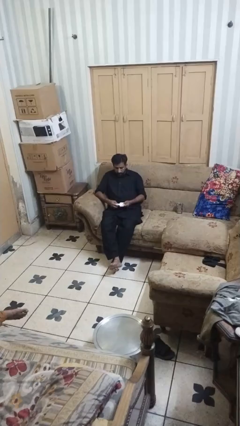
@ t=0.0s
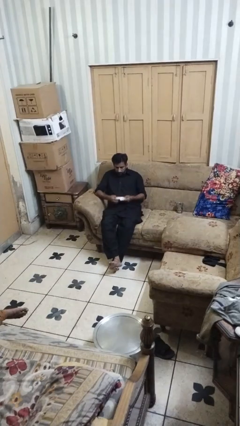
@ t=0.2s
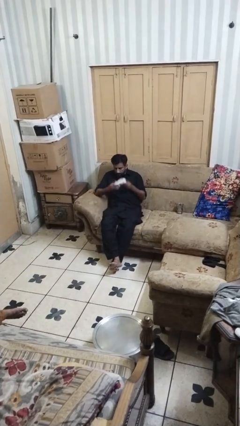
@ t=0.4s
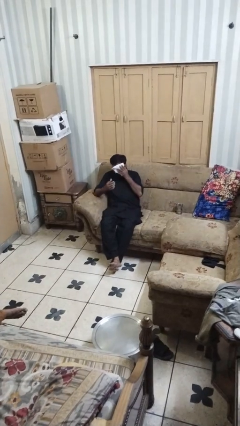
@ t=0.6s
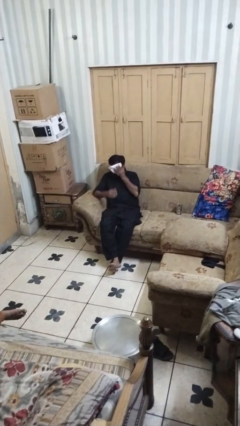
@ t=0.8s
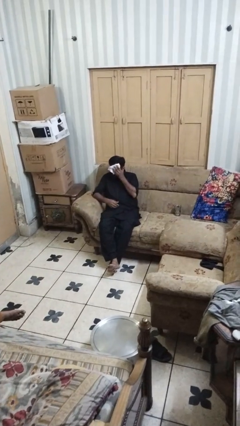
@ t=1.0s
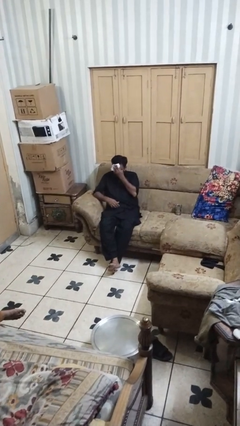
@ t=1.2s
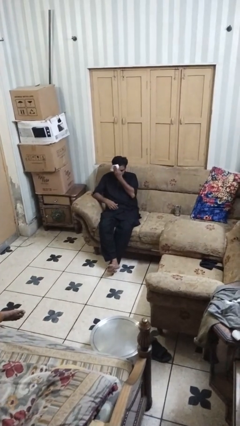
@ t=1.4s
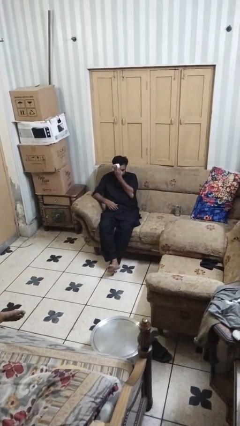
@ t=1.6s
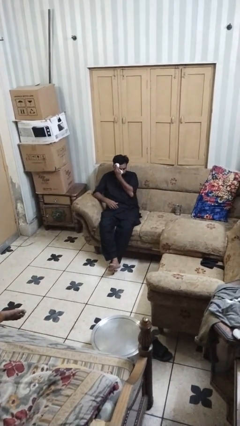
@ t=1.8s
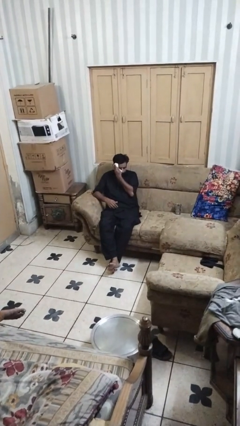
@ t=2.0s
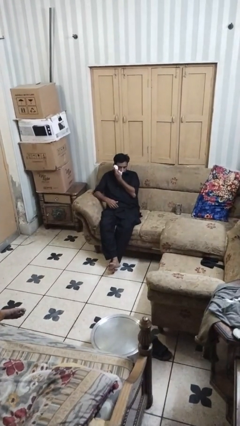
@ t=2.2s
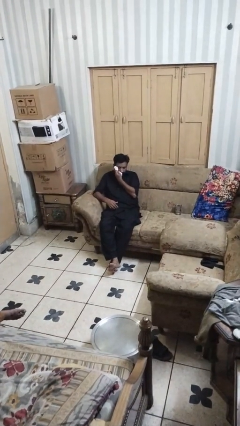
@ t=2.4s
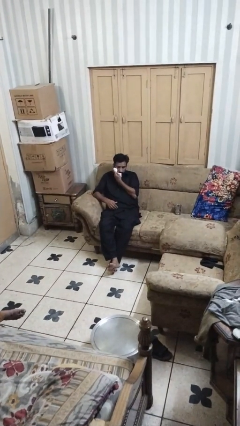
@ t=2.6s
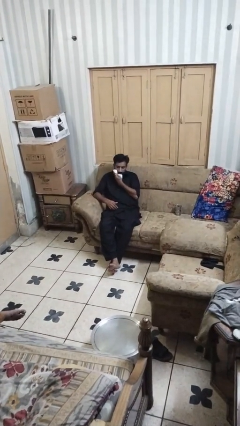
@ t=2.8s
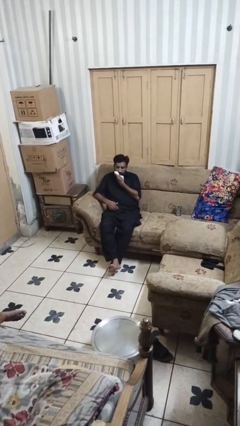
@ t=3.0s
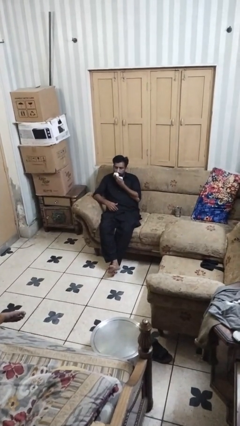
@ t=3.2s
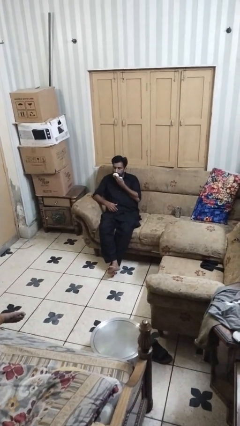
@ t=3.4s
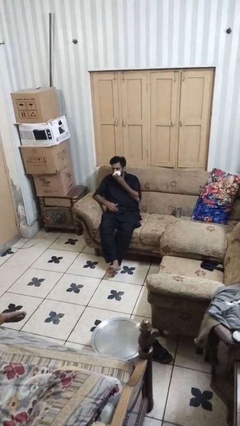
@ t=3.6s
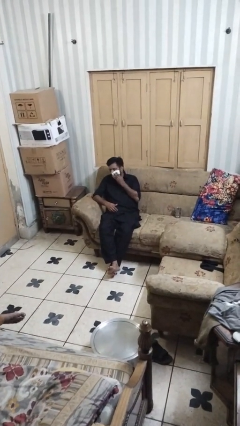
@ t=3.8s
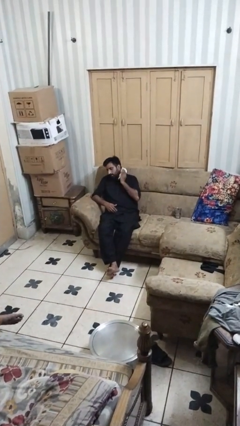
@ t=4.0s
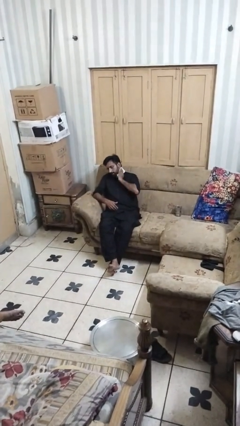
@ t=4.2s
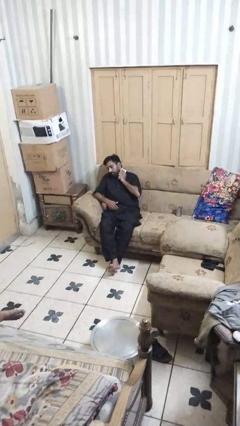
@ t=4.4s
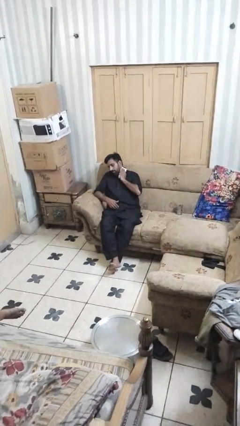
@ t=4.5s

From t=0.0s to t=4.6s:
person wipes mouth with napkin

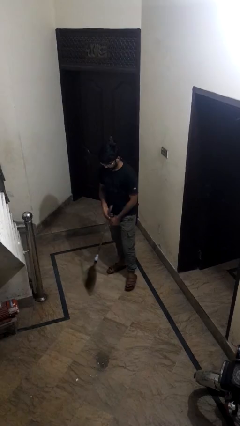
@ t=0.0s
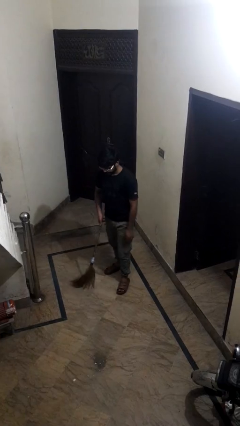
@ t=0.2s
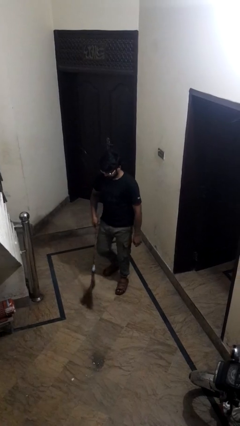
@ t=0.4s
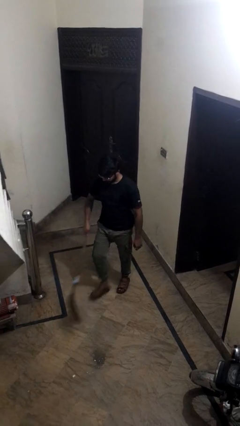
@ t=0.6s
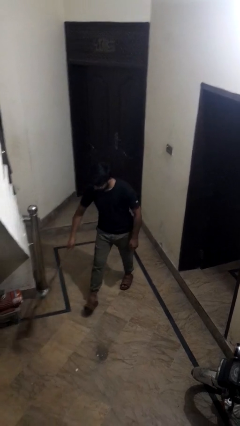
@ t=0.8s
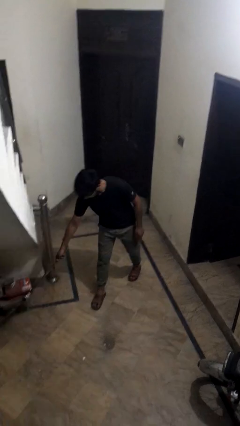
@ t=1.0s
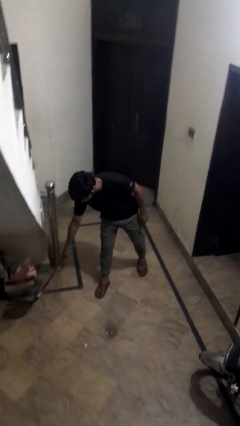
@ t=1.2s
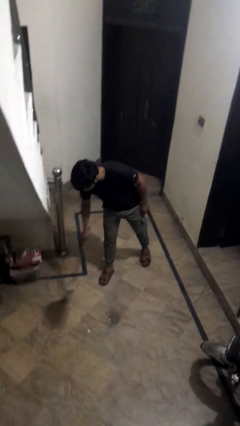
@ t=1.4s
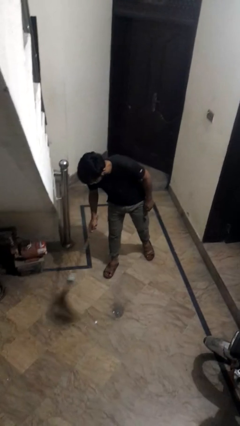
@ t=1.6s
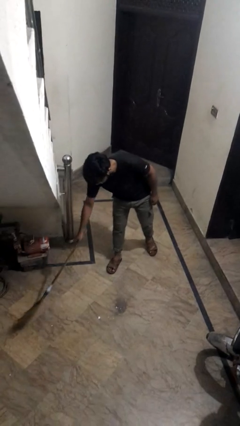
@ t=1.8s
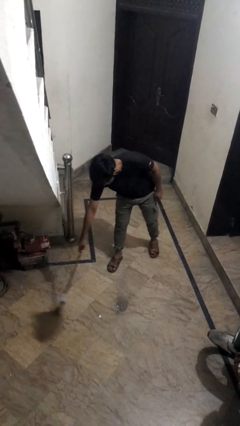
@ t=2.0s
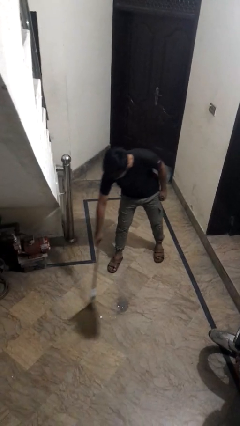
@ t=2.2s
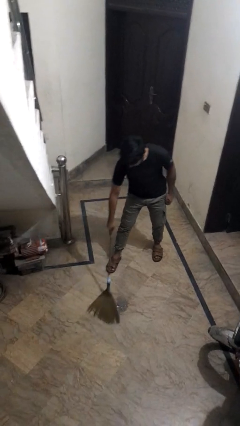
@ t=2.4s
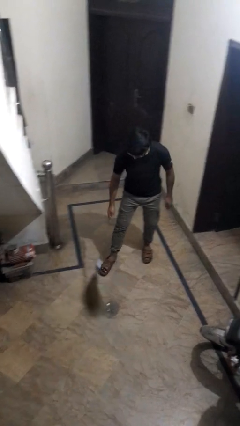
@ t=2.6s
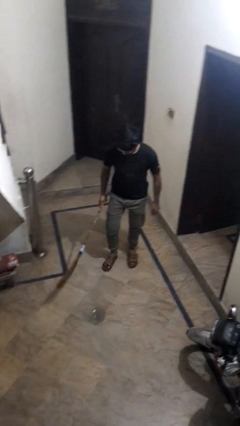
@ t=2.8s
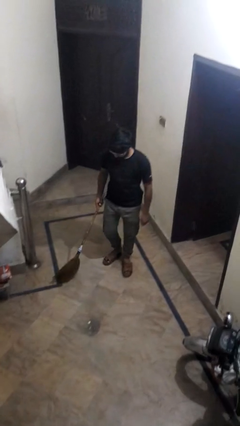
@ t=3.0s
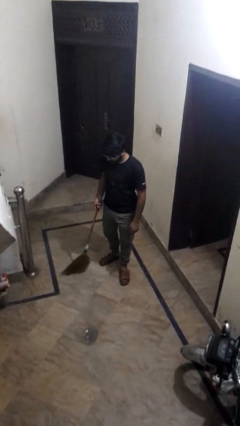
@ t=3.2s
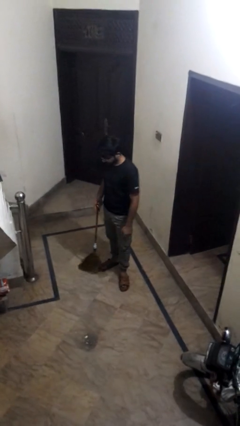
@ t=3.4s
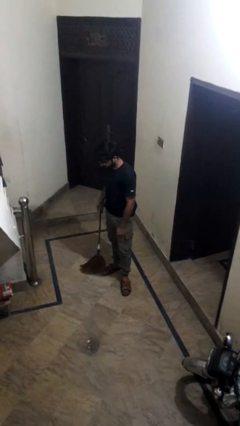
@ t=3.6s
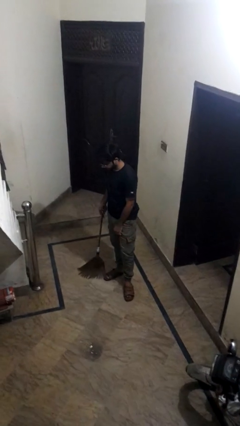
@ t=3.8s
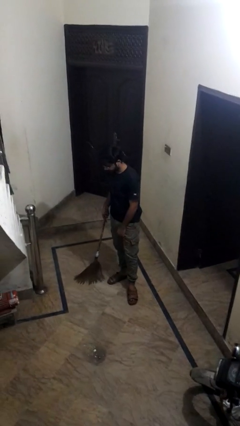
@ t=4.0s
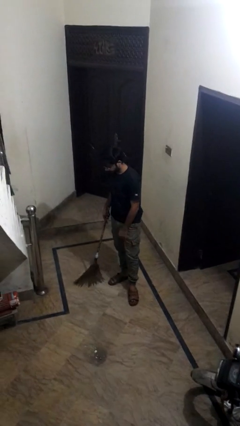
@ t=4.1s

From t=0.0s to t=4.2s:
person sweeps floor

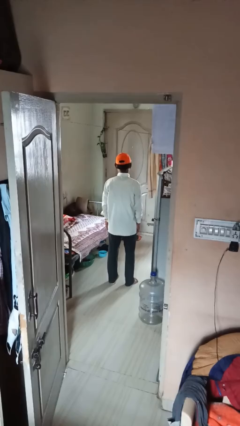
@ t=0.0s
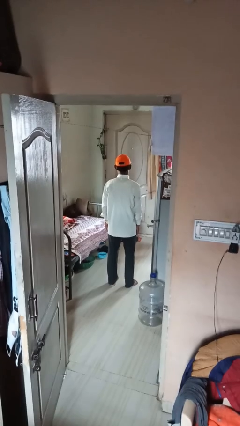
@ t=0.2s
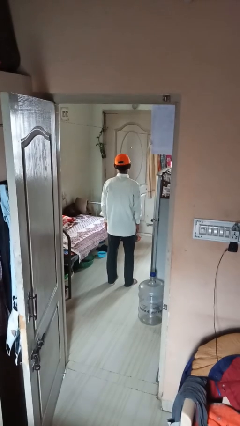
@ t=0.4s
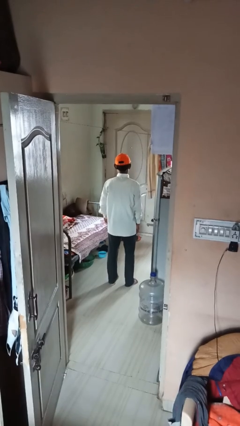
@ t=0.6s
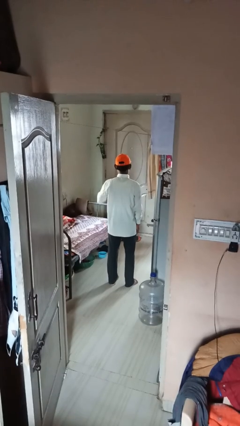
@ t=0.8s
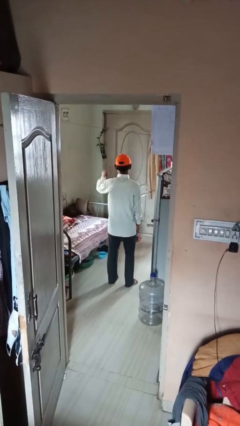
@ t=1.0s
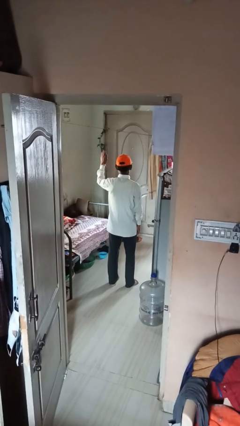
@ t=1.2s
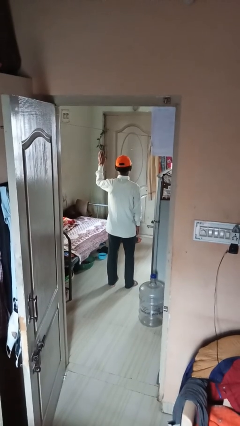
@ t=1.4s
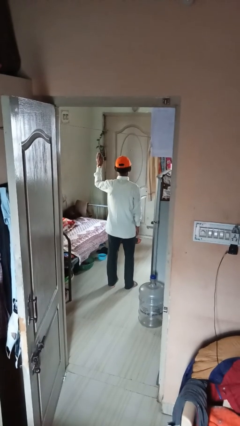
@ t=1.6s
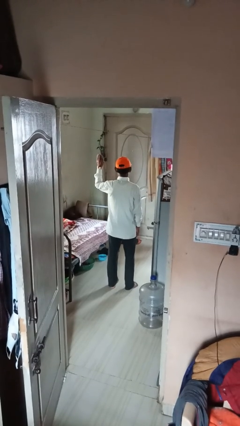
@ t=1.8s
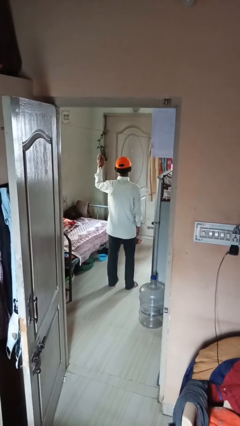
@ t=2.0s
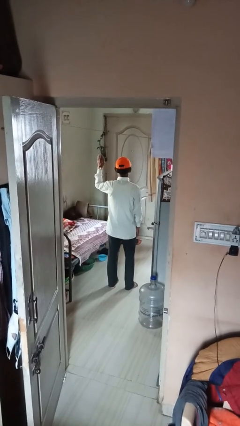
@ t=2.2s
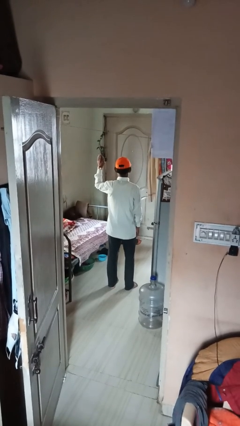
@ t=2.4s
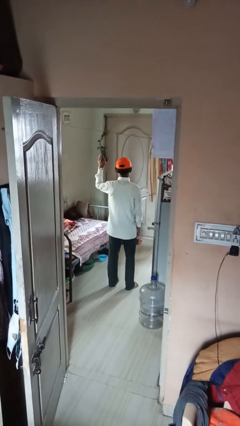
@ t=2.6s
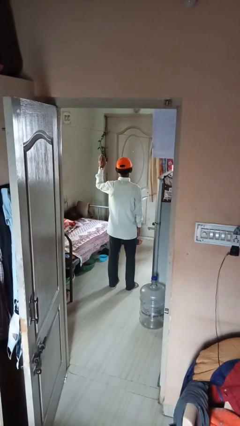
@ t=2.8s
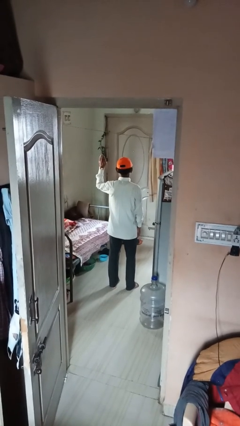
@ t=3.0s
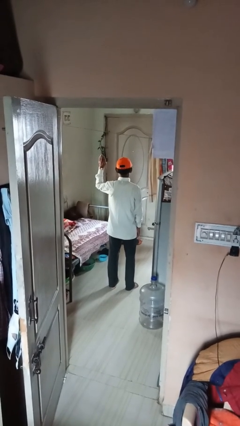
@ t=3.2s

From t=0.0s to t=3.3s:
person gestures raise hand

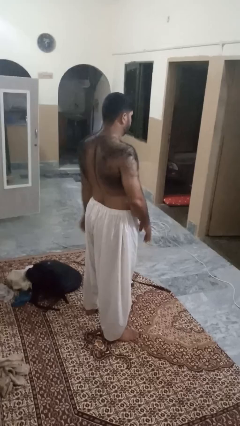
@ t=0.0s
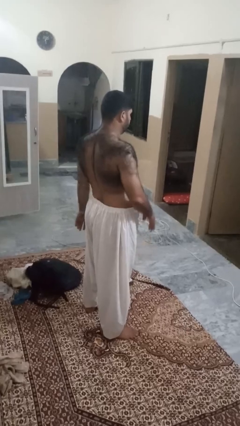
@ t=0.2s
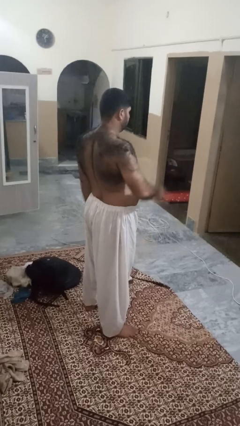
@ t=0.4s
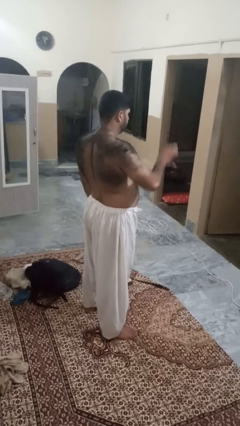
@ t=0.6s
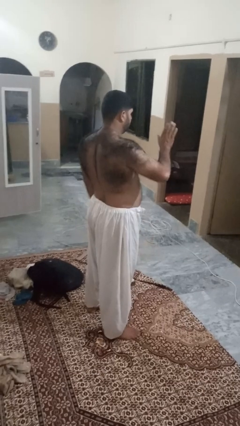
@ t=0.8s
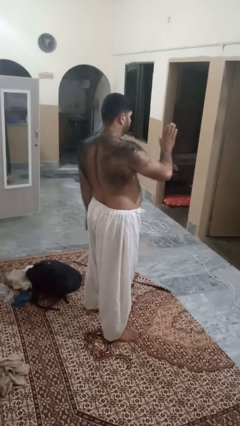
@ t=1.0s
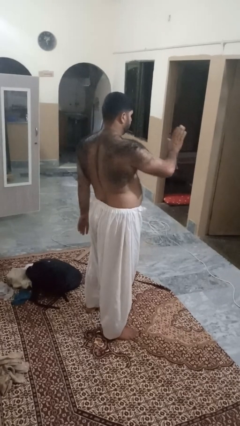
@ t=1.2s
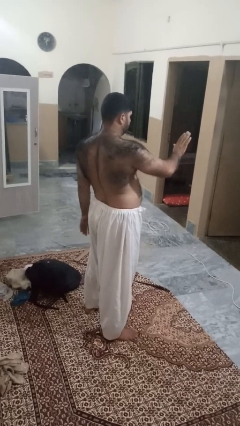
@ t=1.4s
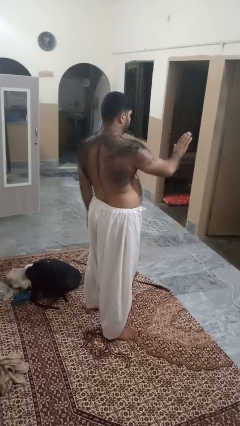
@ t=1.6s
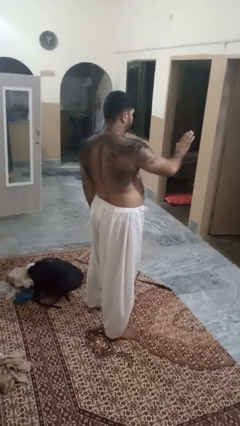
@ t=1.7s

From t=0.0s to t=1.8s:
person gestures stop

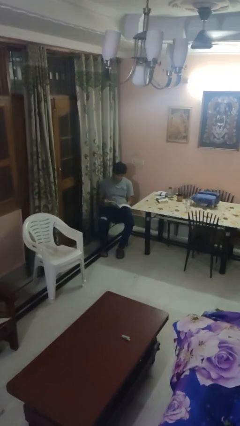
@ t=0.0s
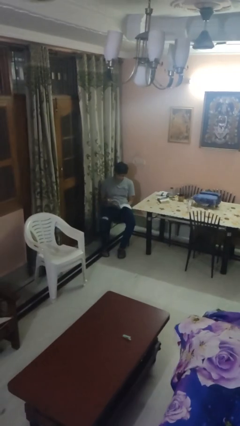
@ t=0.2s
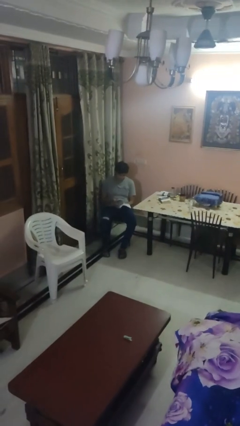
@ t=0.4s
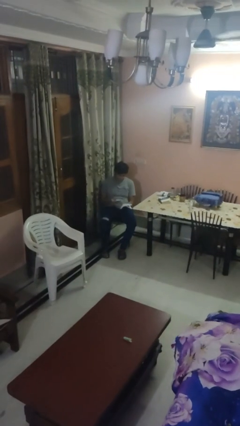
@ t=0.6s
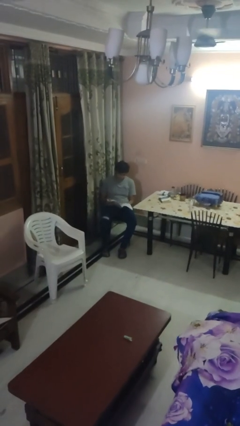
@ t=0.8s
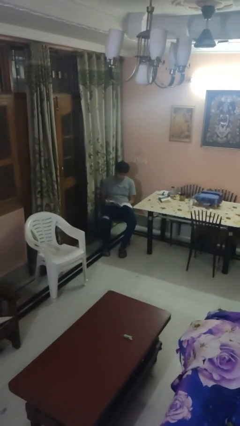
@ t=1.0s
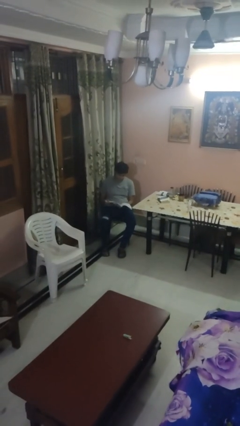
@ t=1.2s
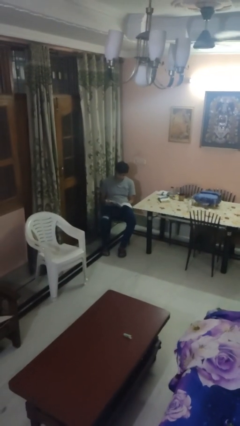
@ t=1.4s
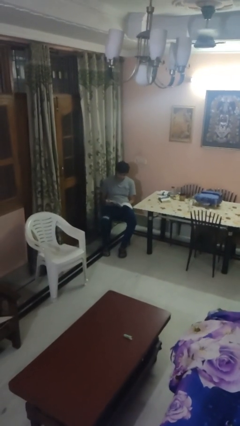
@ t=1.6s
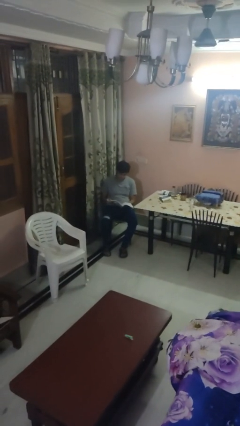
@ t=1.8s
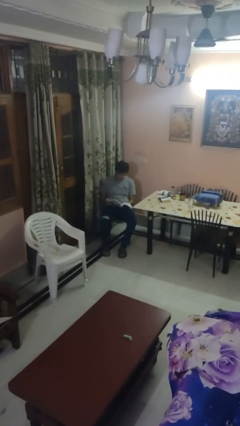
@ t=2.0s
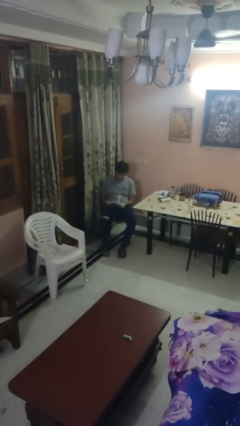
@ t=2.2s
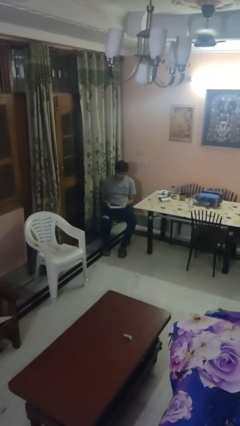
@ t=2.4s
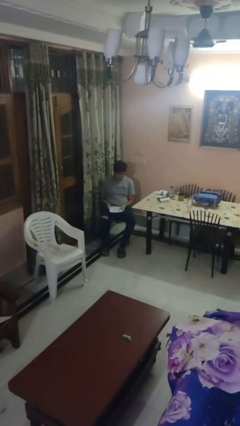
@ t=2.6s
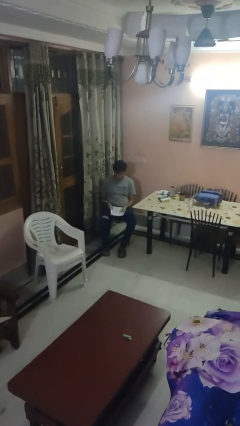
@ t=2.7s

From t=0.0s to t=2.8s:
person reads magazine

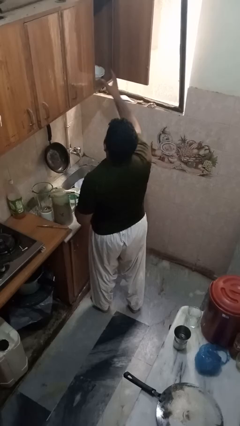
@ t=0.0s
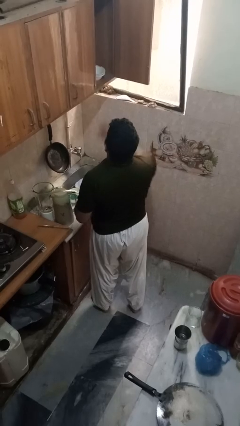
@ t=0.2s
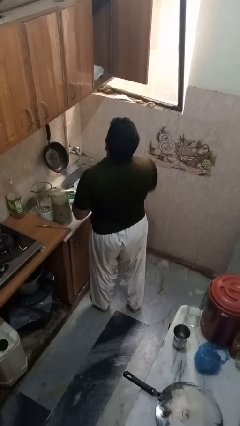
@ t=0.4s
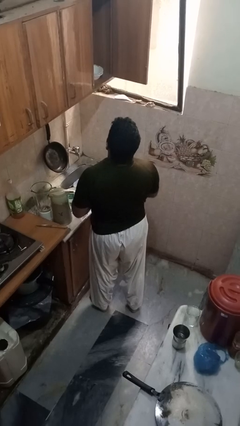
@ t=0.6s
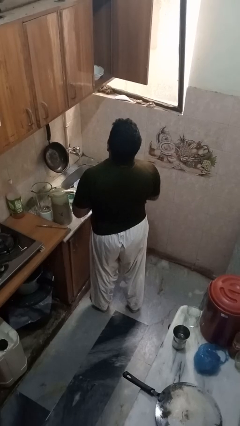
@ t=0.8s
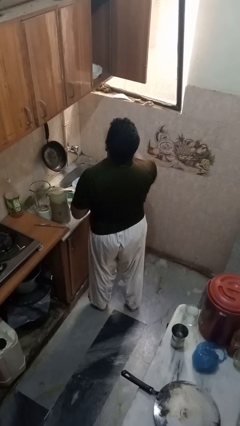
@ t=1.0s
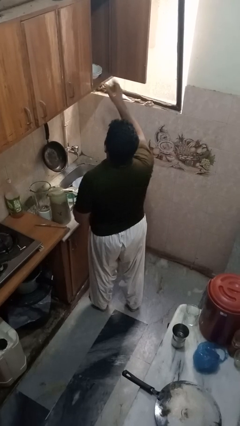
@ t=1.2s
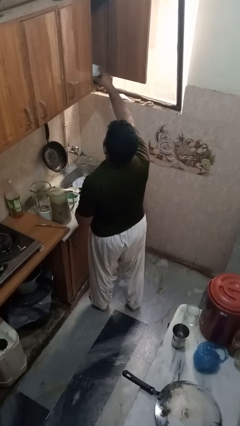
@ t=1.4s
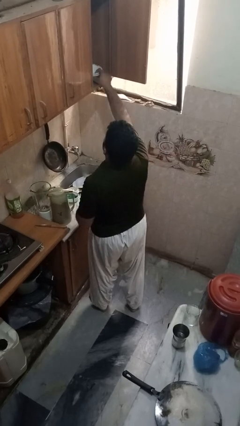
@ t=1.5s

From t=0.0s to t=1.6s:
person takes object from cabinet
